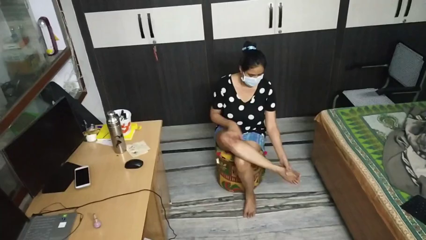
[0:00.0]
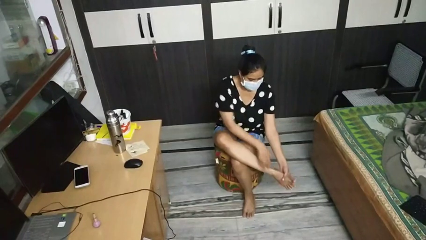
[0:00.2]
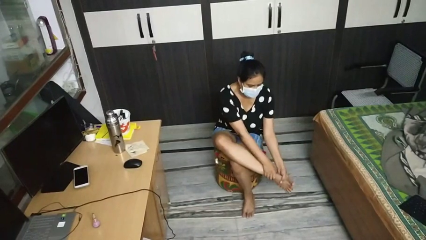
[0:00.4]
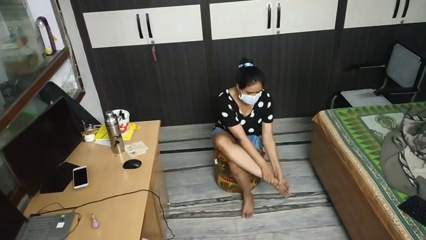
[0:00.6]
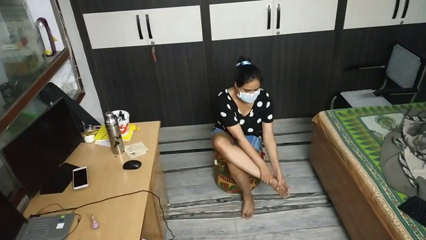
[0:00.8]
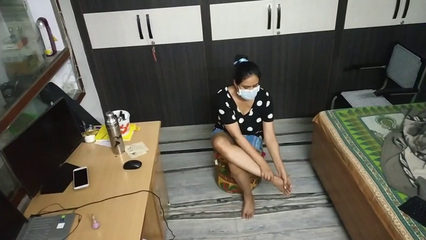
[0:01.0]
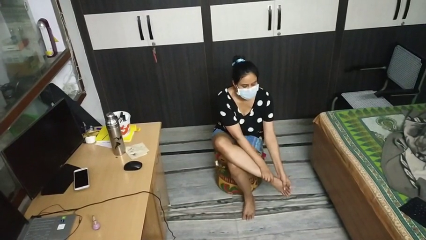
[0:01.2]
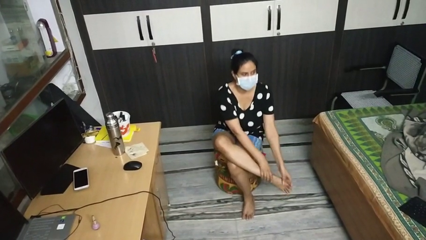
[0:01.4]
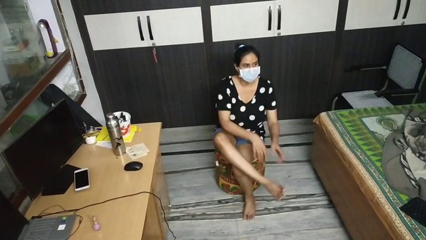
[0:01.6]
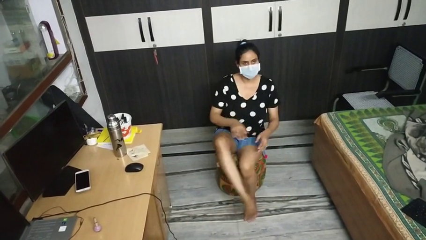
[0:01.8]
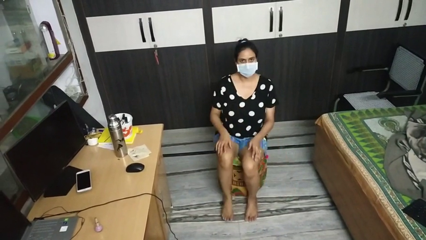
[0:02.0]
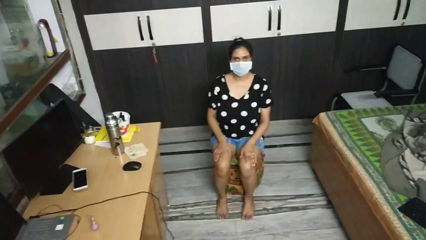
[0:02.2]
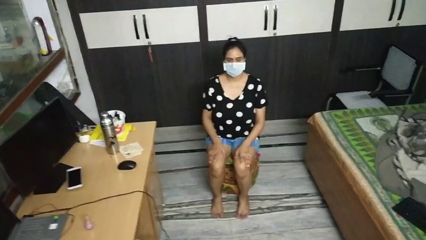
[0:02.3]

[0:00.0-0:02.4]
person rubs foot

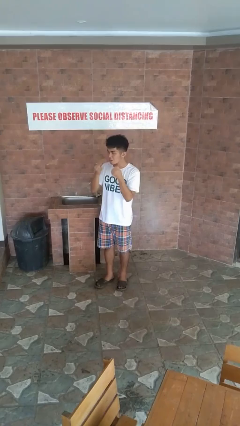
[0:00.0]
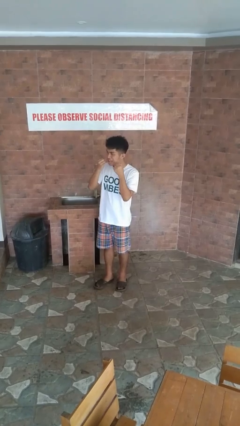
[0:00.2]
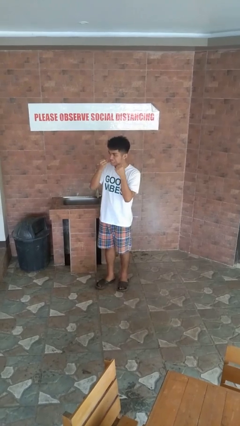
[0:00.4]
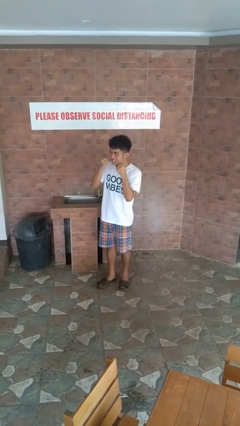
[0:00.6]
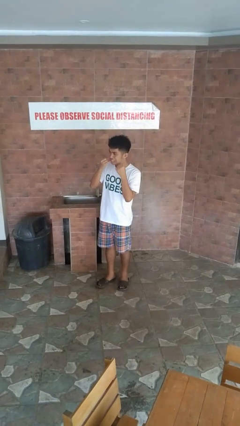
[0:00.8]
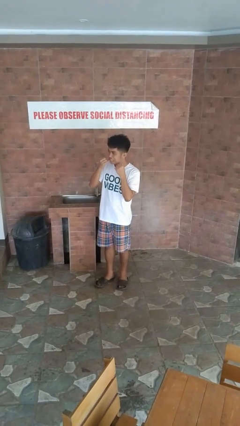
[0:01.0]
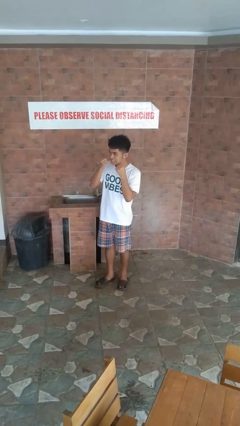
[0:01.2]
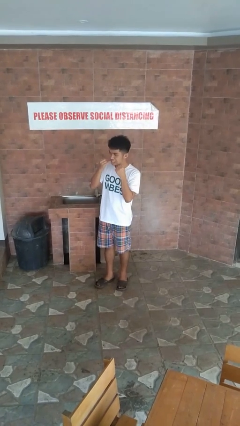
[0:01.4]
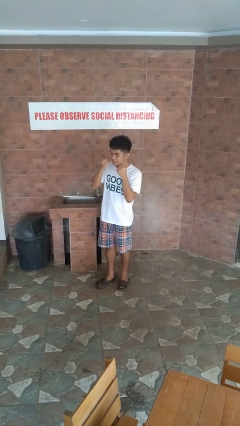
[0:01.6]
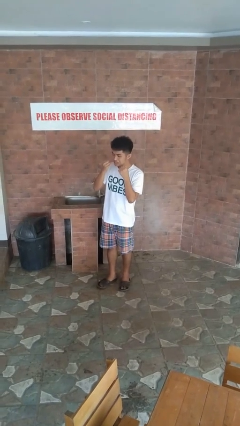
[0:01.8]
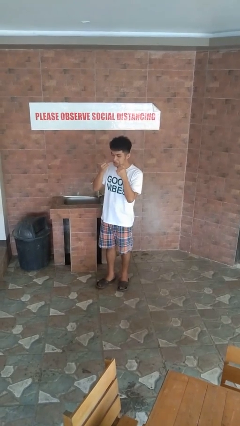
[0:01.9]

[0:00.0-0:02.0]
person flosses

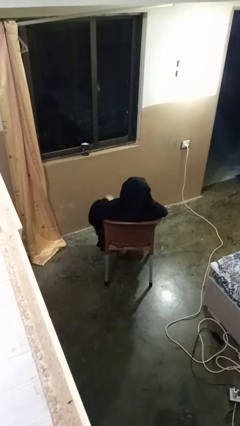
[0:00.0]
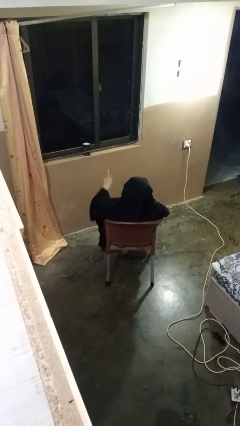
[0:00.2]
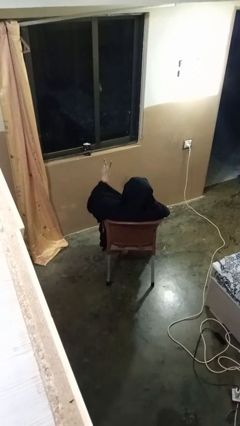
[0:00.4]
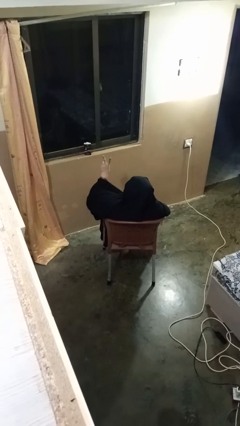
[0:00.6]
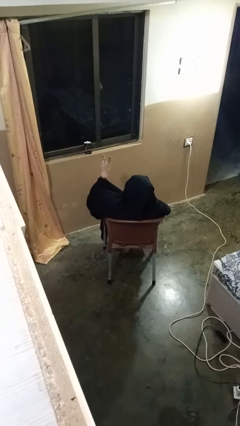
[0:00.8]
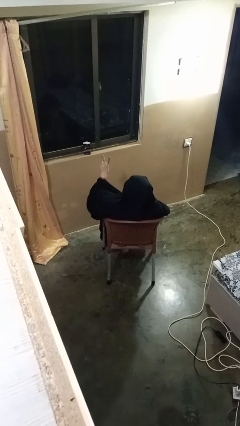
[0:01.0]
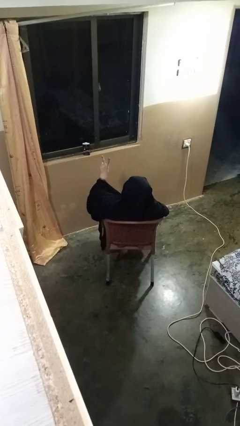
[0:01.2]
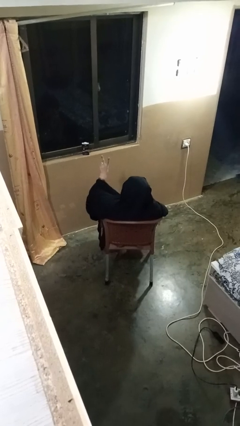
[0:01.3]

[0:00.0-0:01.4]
person gestures peace

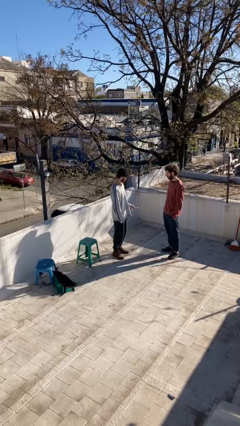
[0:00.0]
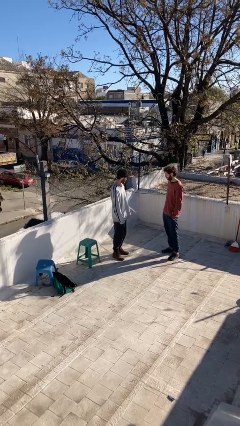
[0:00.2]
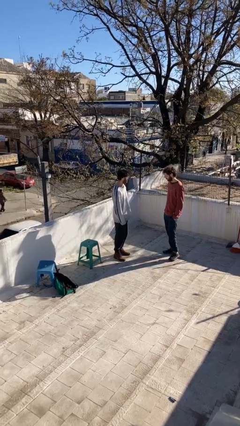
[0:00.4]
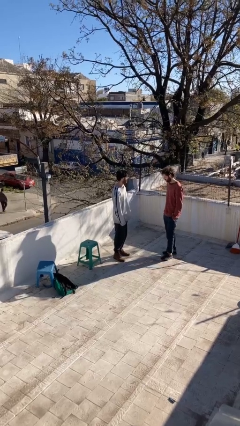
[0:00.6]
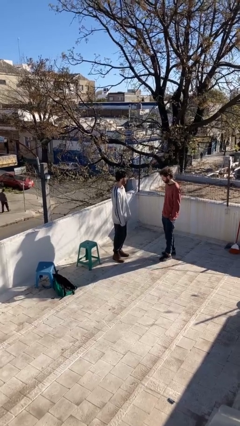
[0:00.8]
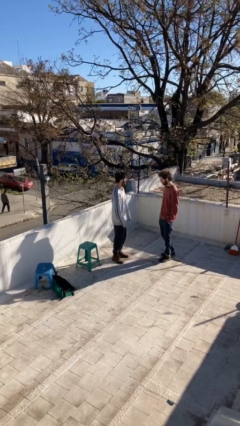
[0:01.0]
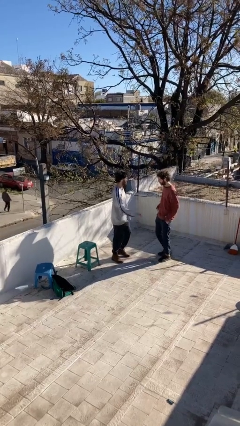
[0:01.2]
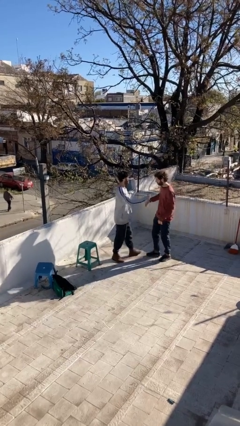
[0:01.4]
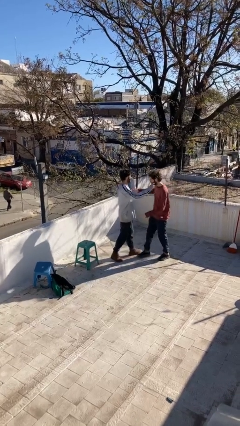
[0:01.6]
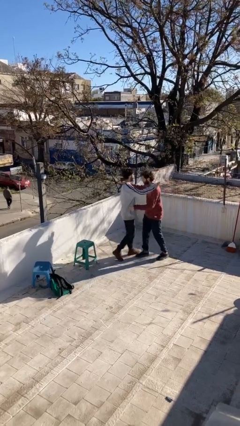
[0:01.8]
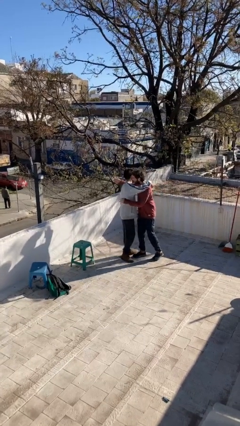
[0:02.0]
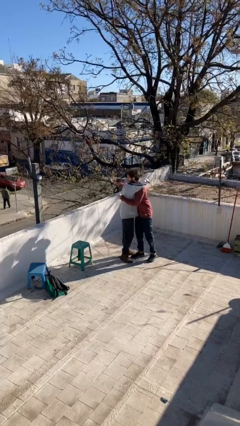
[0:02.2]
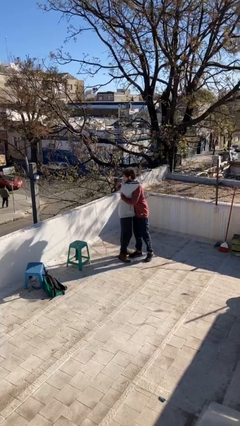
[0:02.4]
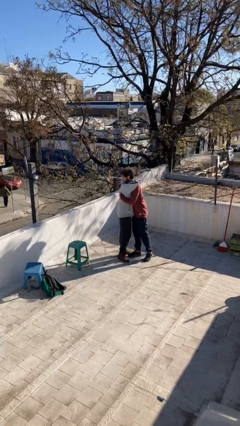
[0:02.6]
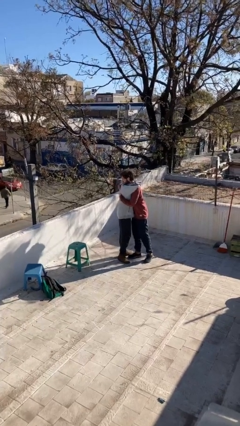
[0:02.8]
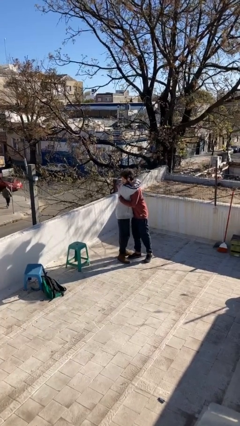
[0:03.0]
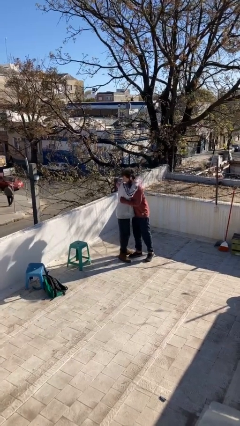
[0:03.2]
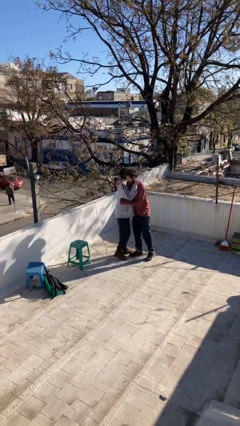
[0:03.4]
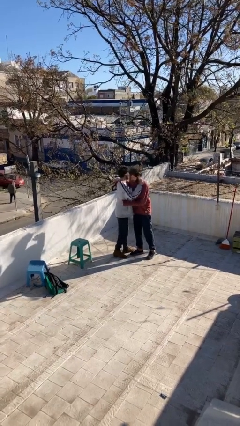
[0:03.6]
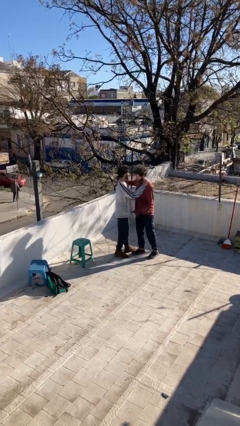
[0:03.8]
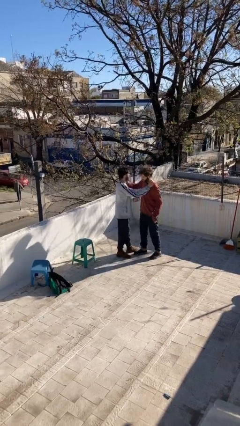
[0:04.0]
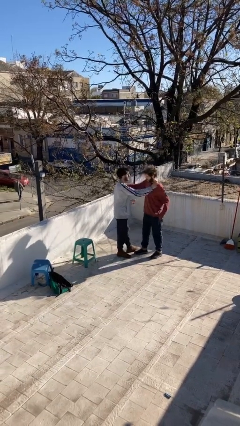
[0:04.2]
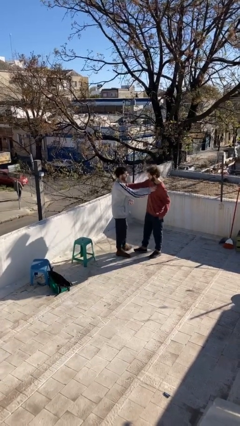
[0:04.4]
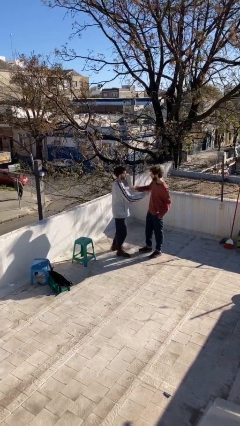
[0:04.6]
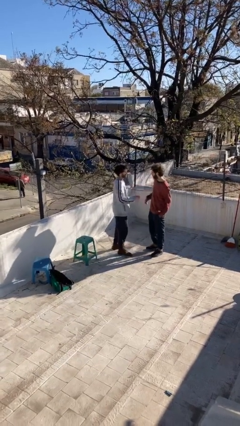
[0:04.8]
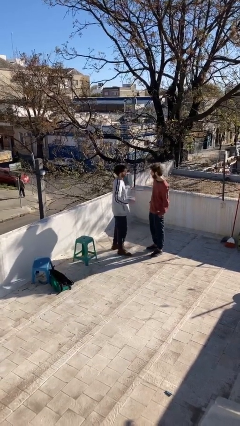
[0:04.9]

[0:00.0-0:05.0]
person embraces person

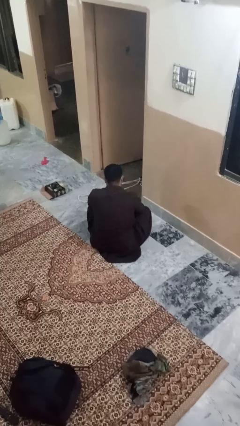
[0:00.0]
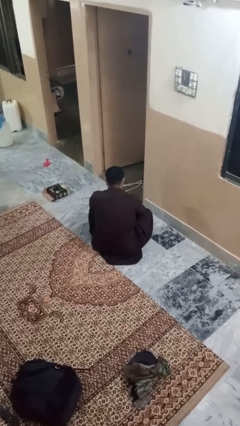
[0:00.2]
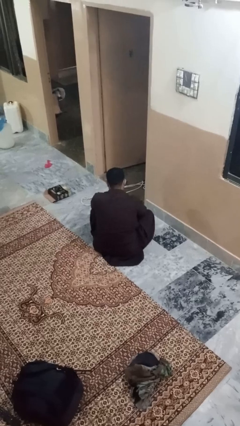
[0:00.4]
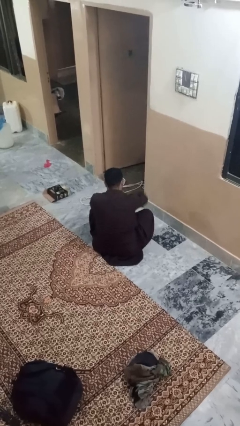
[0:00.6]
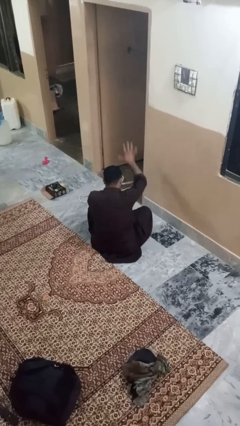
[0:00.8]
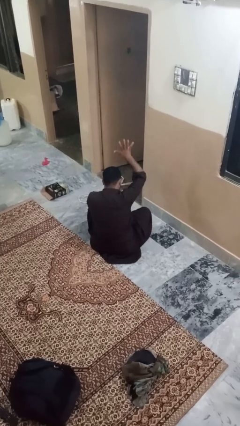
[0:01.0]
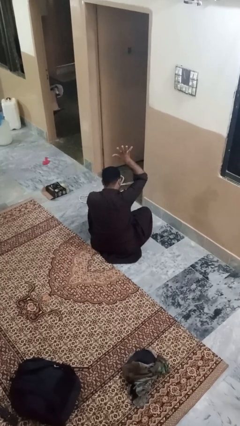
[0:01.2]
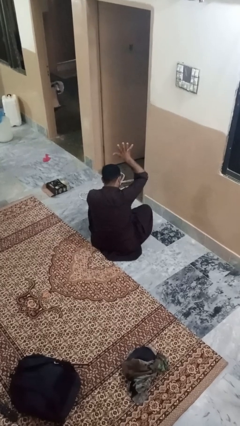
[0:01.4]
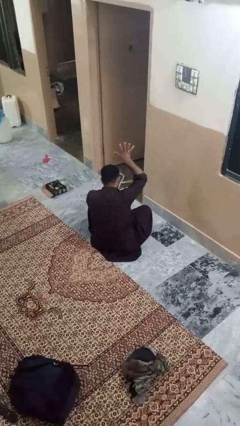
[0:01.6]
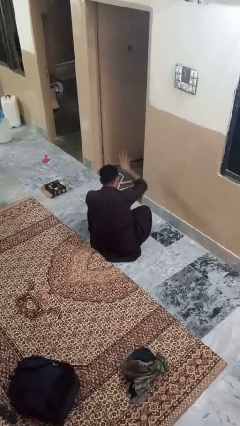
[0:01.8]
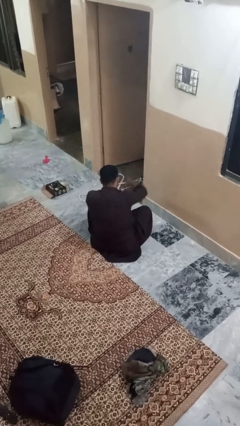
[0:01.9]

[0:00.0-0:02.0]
person gestures number five

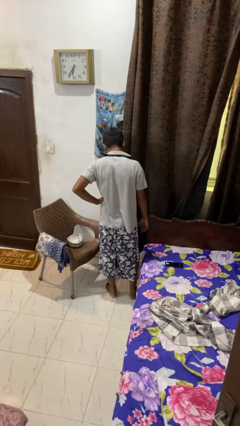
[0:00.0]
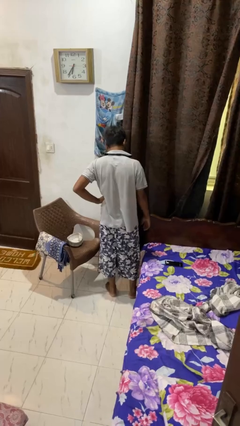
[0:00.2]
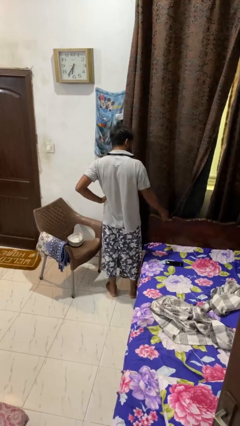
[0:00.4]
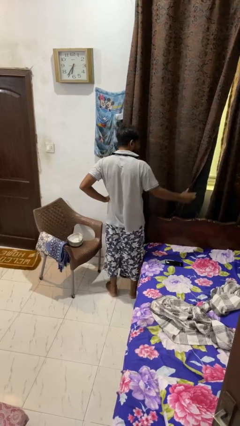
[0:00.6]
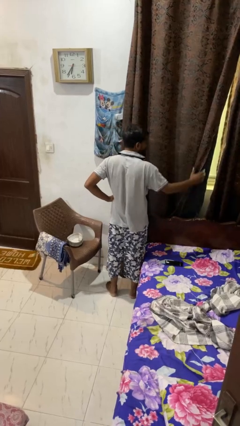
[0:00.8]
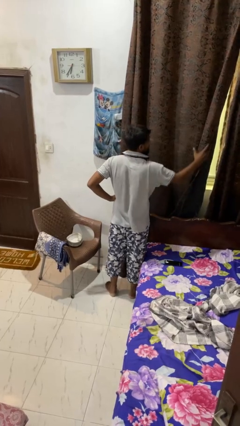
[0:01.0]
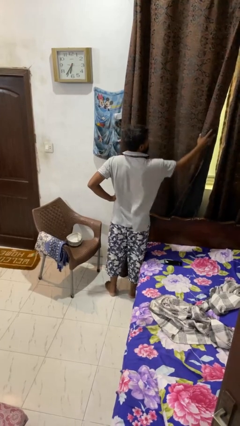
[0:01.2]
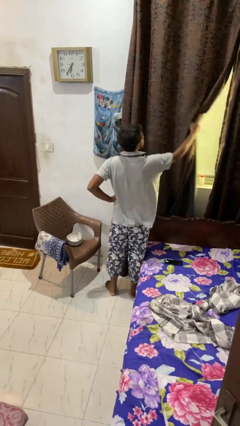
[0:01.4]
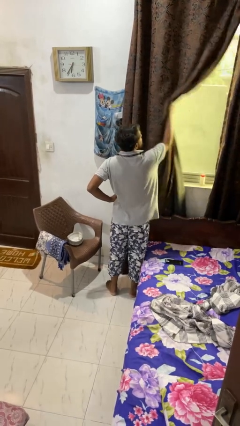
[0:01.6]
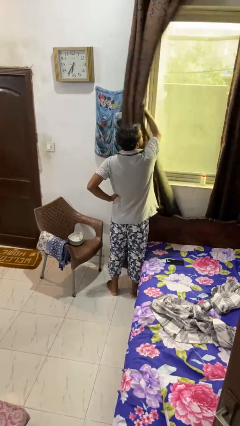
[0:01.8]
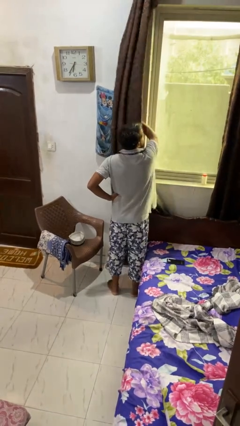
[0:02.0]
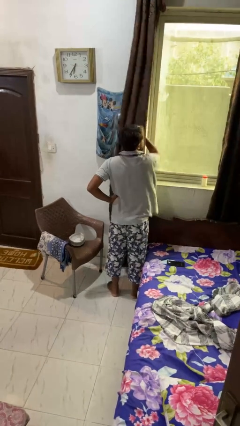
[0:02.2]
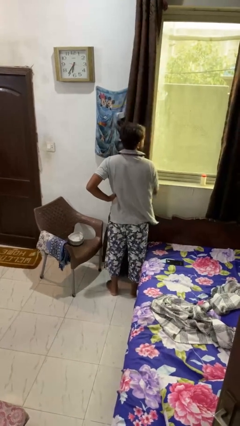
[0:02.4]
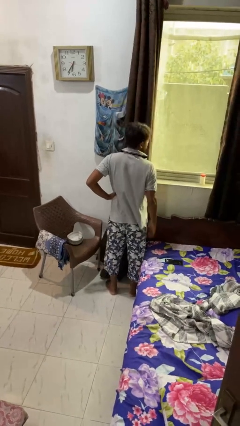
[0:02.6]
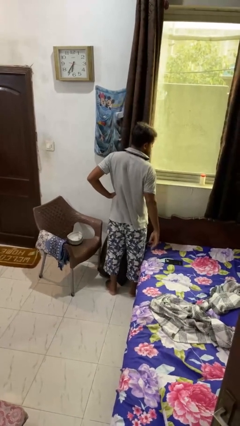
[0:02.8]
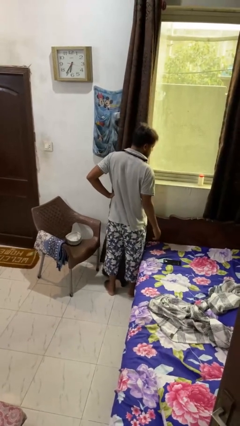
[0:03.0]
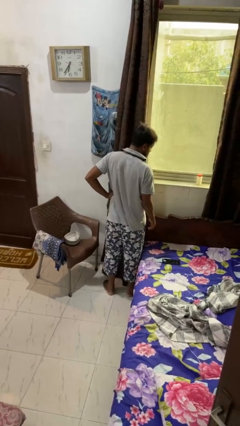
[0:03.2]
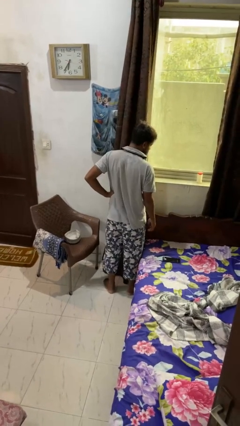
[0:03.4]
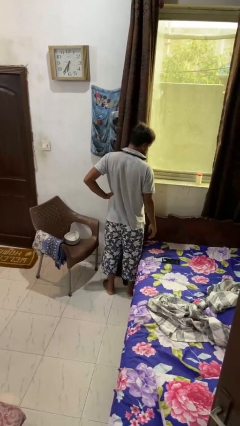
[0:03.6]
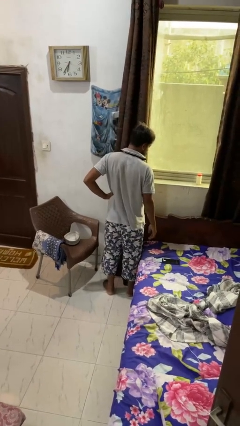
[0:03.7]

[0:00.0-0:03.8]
person opens curtains

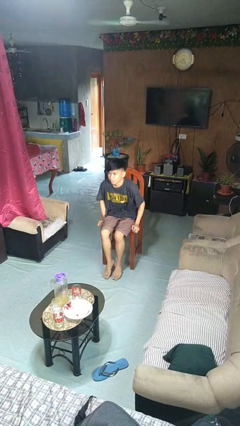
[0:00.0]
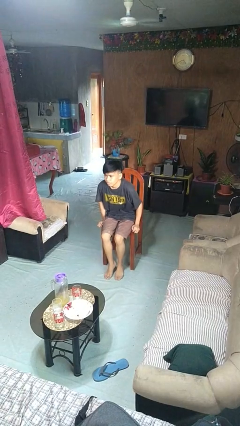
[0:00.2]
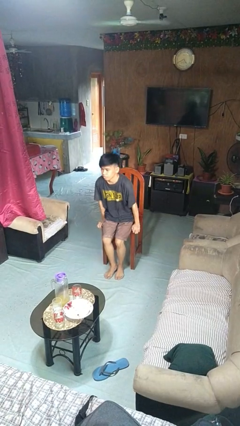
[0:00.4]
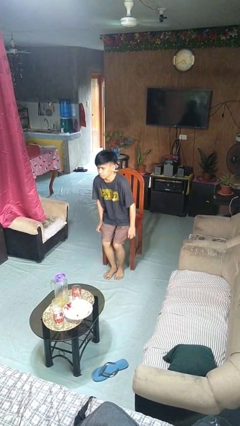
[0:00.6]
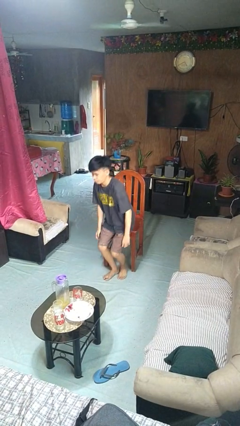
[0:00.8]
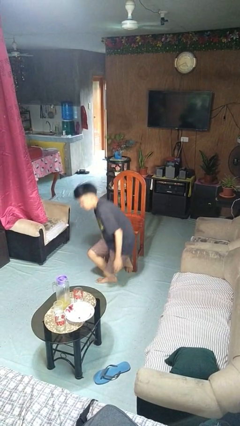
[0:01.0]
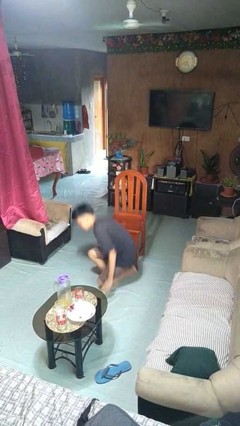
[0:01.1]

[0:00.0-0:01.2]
person falls from chair
